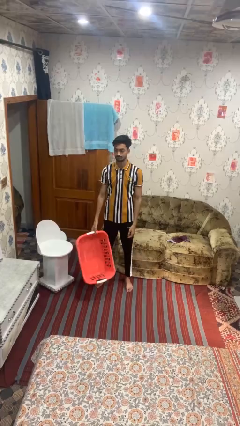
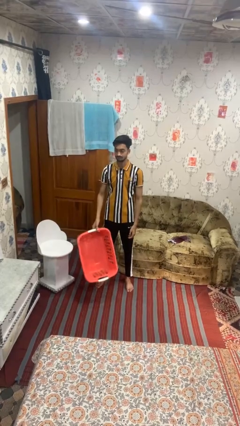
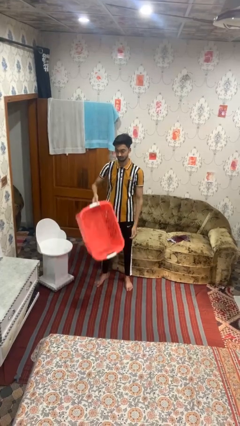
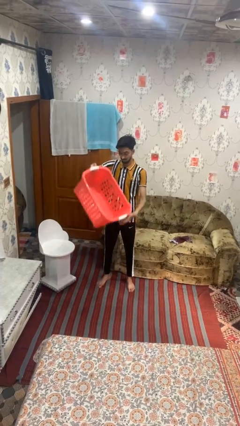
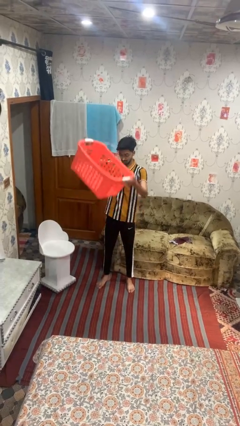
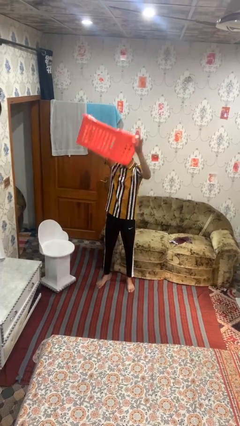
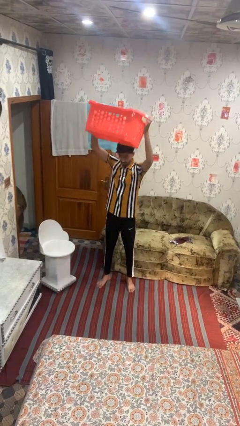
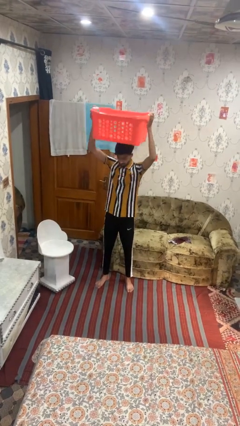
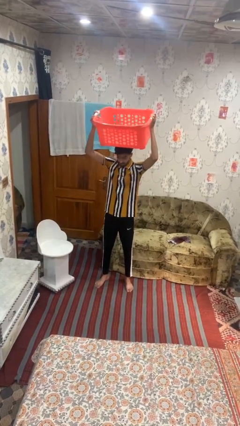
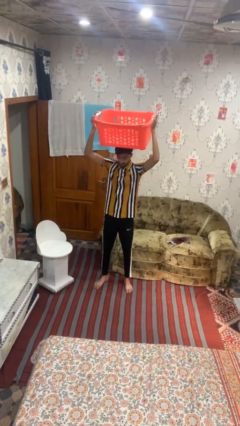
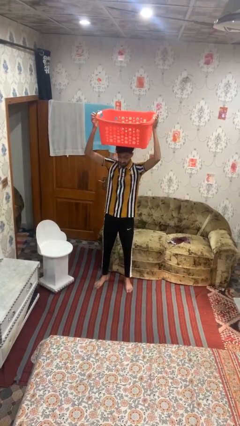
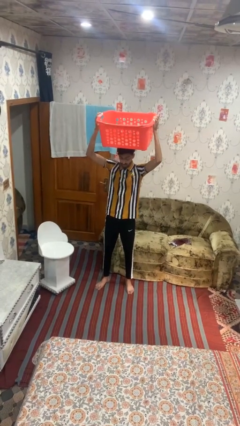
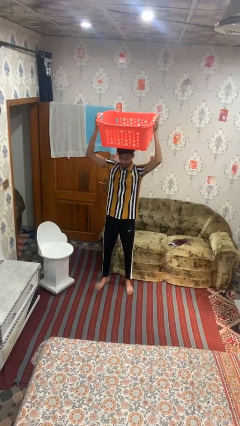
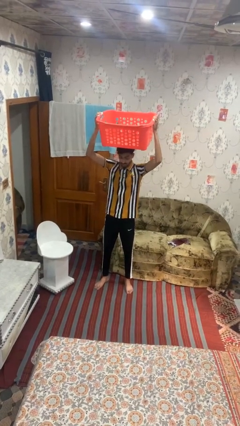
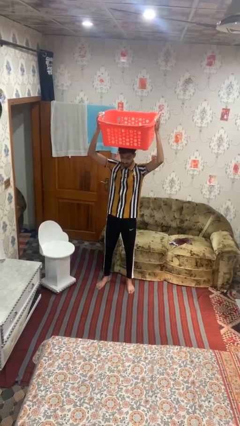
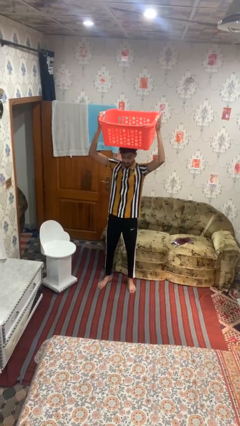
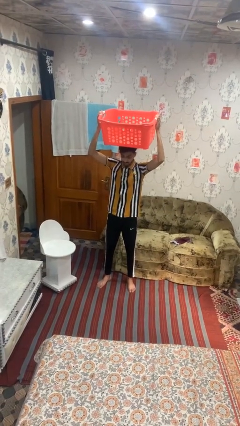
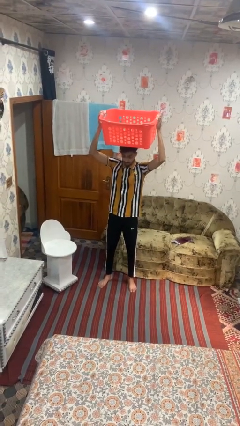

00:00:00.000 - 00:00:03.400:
person holds object above head

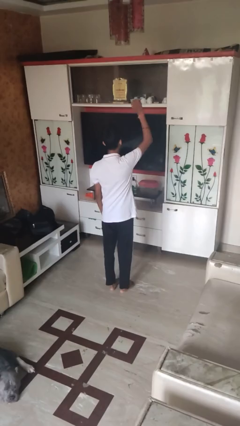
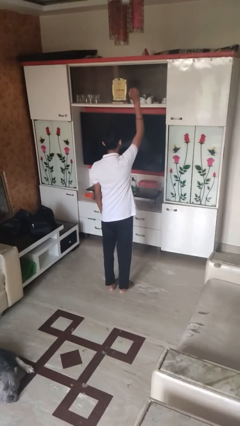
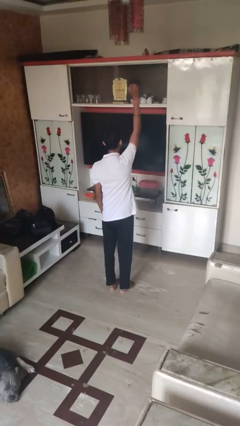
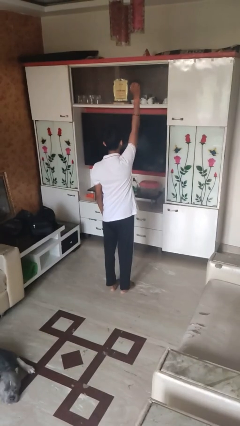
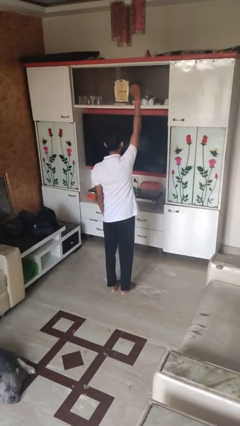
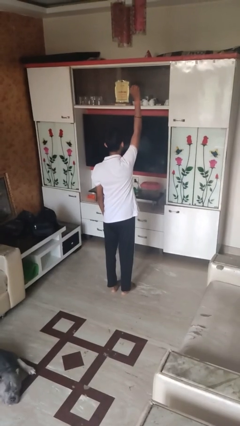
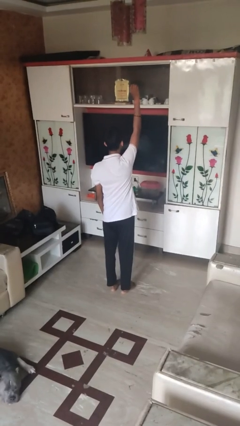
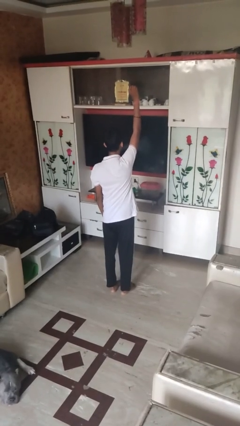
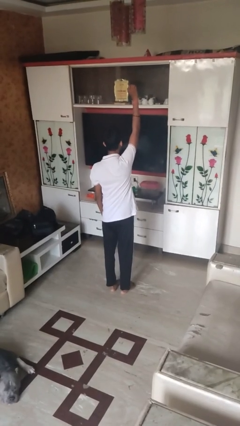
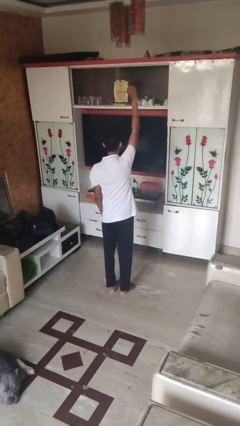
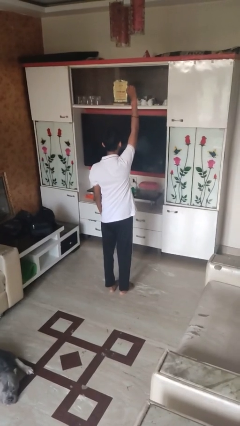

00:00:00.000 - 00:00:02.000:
person gestures raise hand

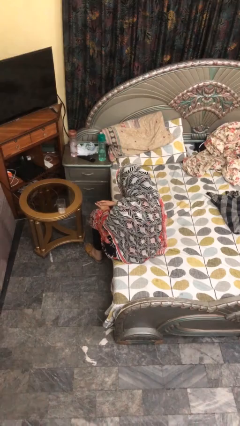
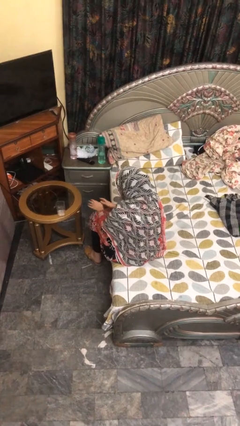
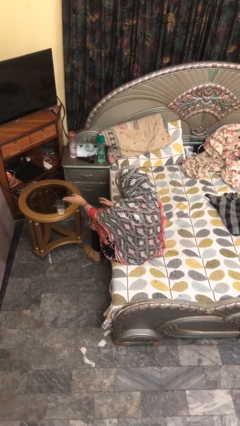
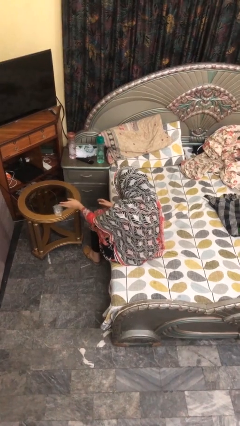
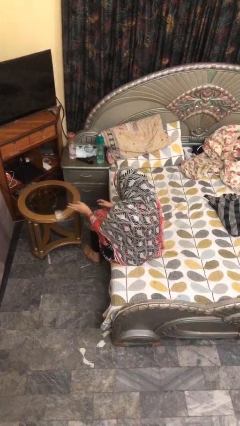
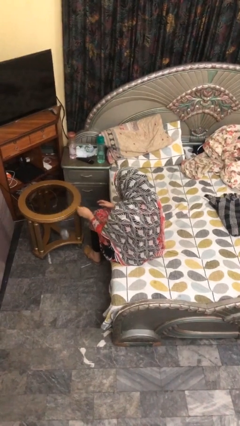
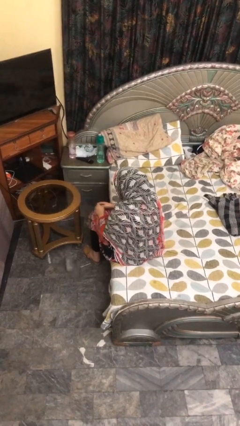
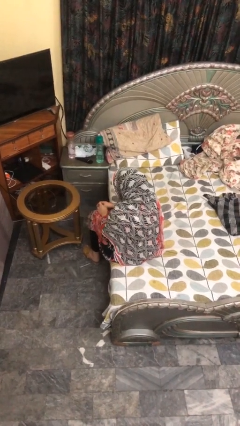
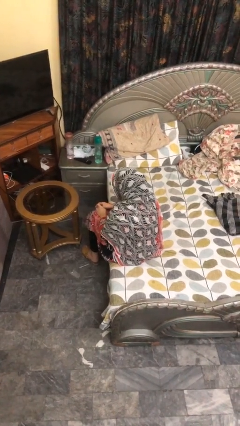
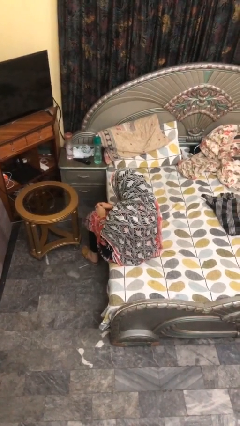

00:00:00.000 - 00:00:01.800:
person spills on floor

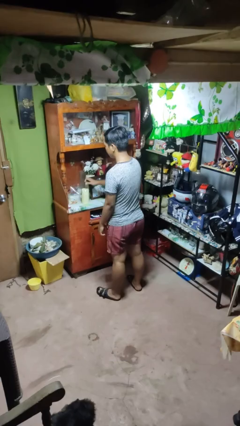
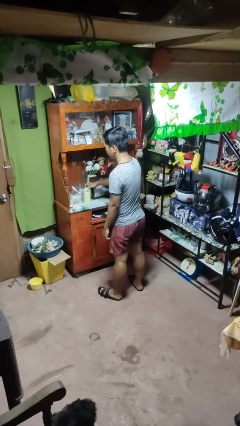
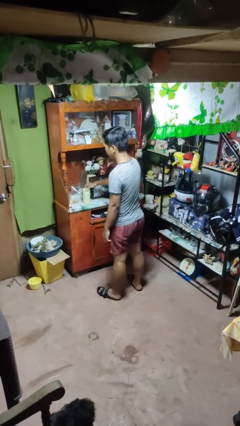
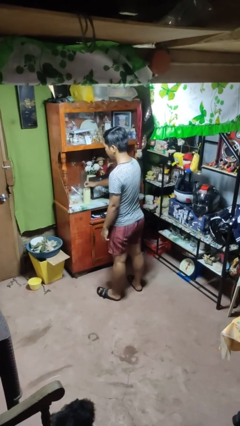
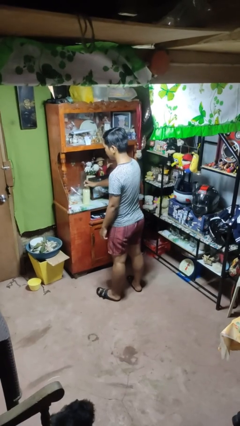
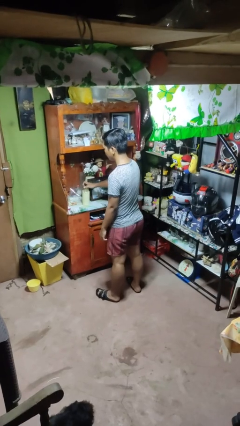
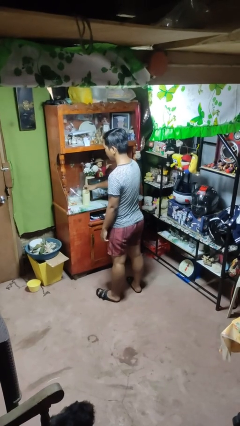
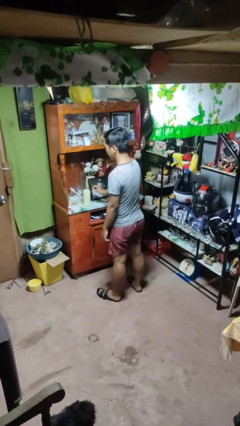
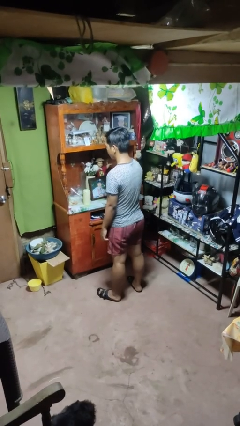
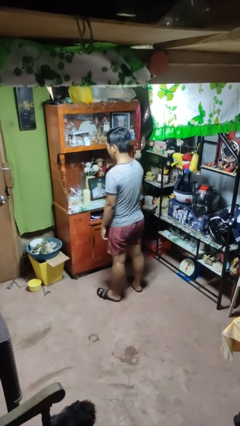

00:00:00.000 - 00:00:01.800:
person taps object with finger

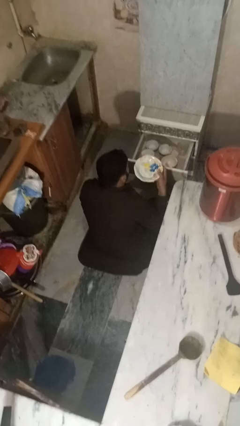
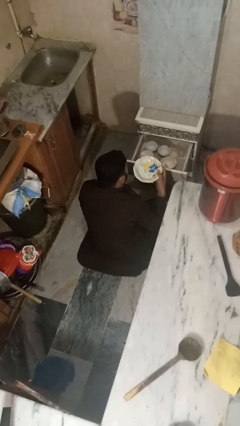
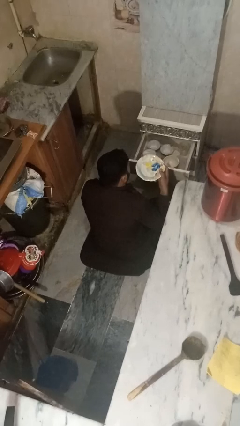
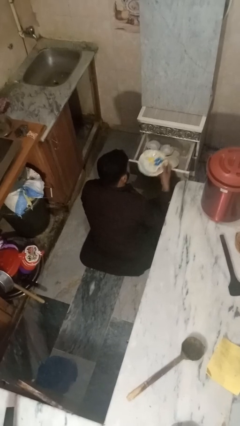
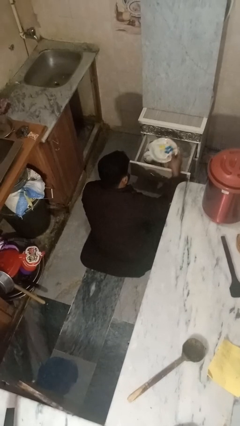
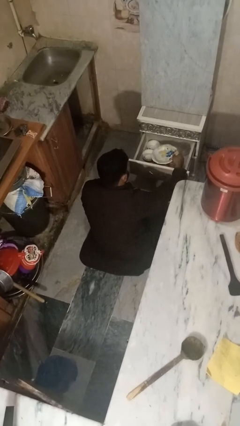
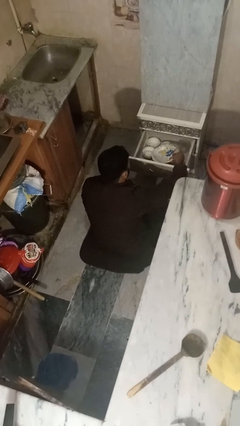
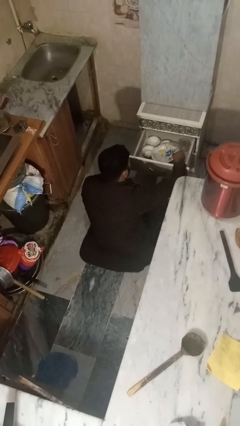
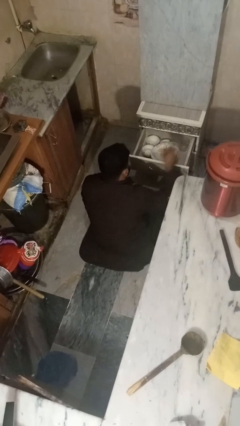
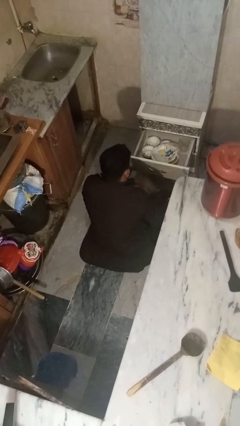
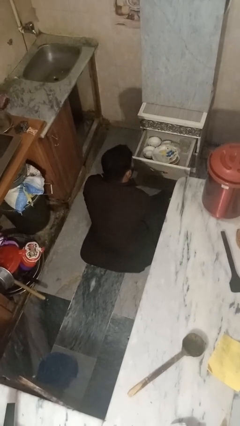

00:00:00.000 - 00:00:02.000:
person puts object into kitchen drawer

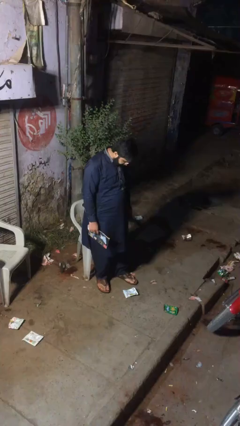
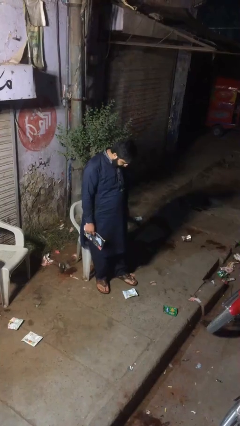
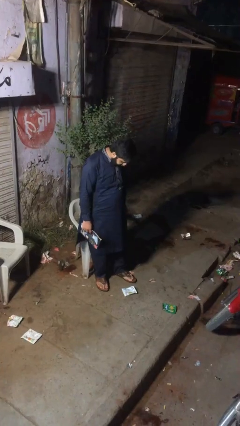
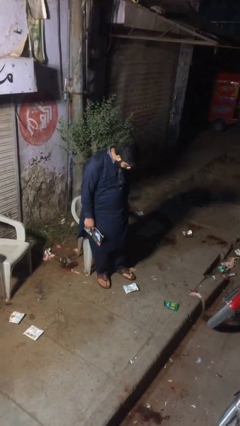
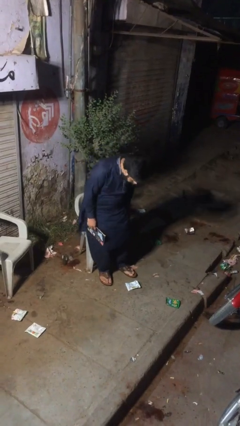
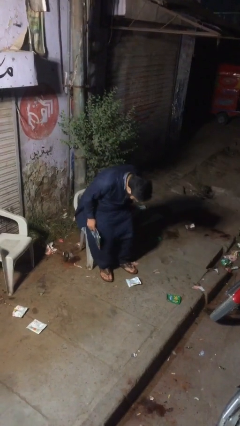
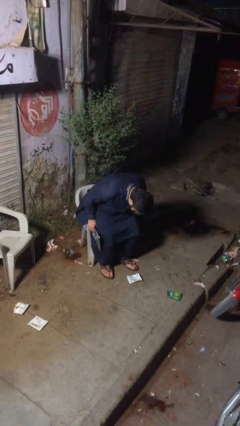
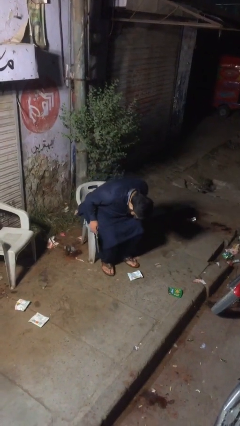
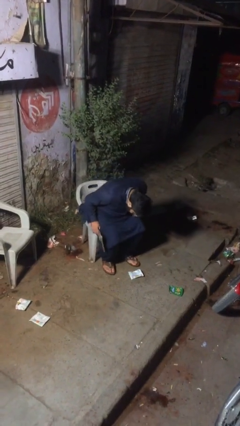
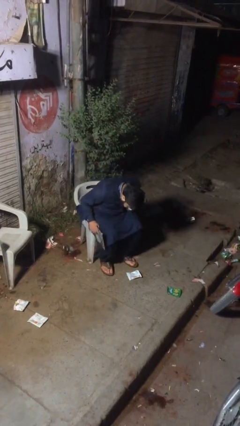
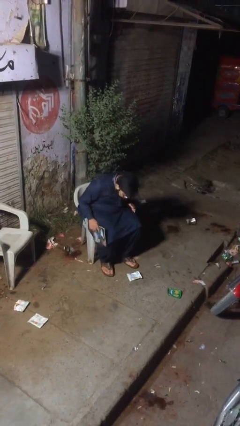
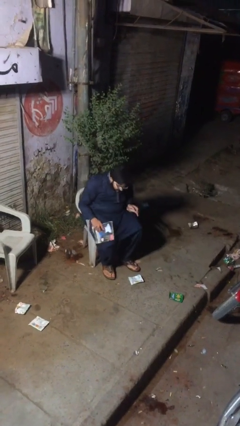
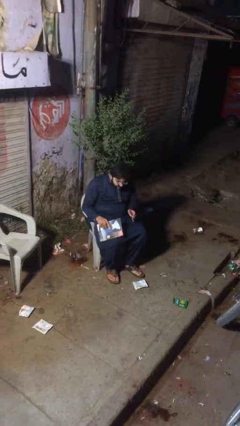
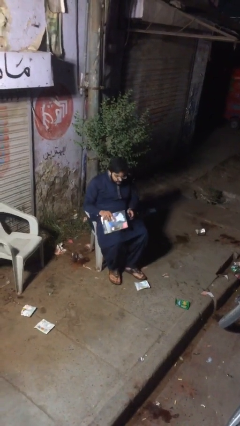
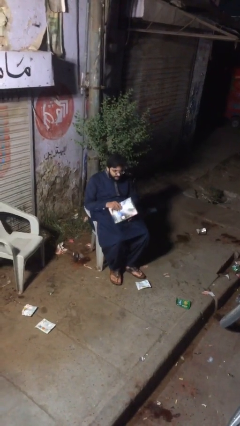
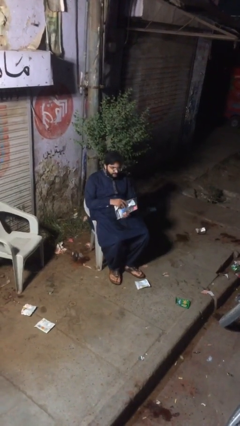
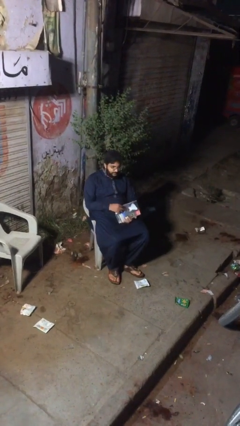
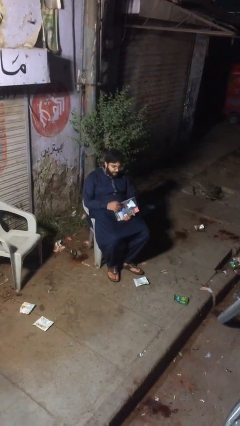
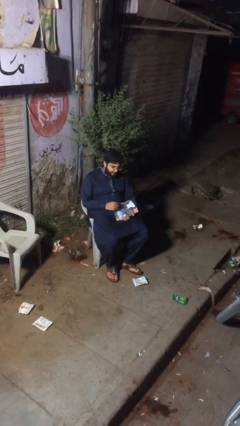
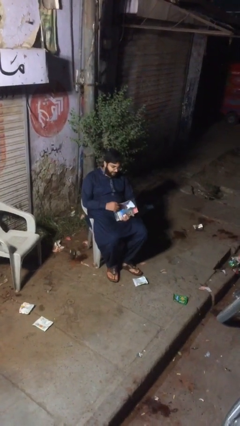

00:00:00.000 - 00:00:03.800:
person sits down

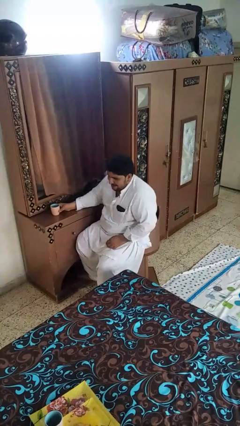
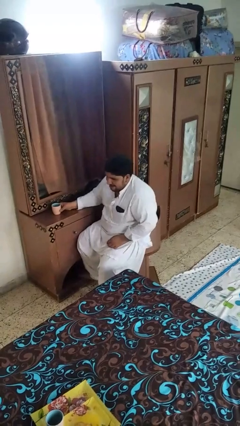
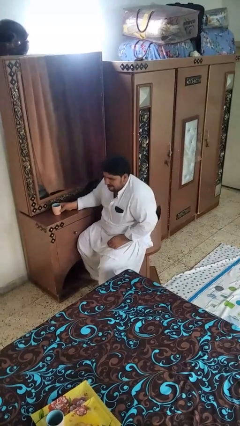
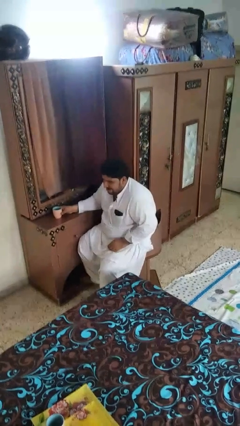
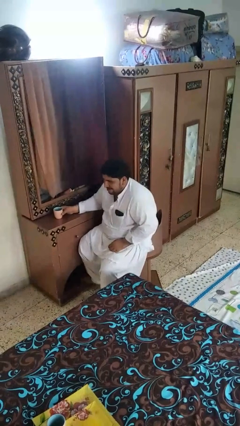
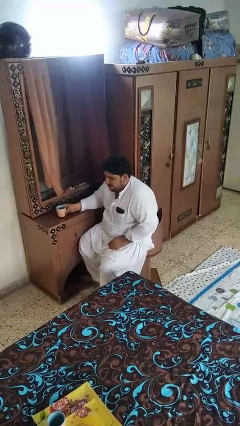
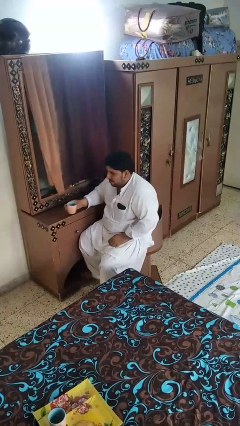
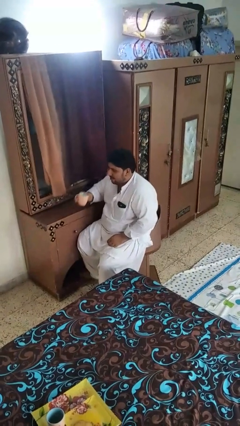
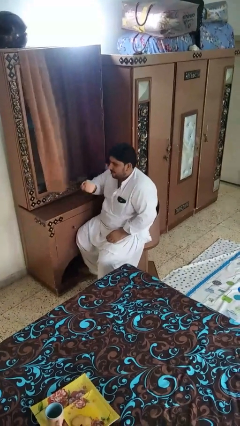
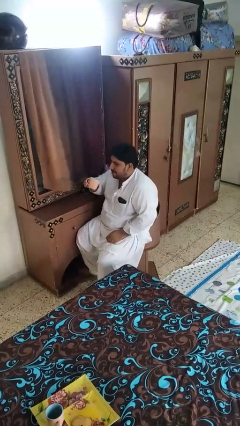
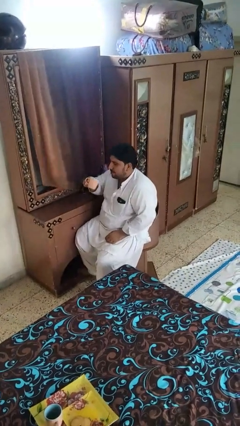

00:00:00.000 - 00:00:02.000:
person picks up object from table
